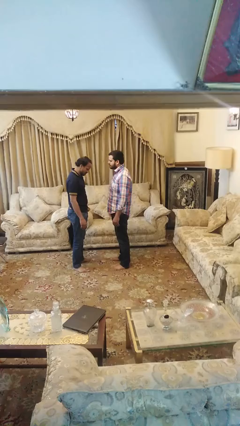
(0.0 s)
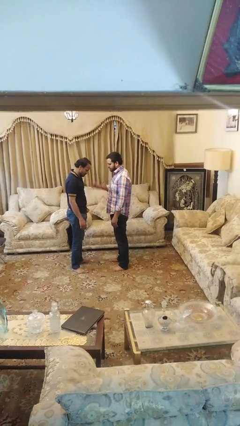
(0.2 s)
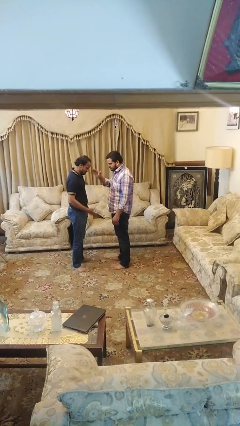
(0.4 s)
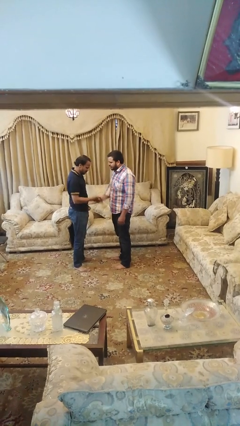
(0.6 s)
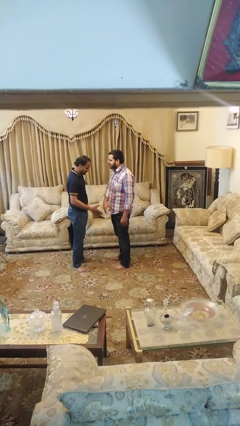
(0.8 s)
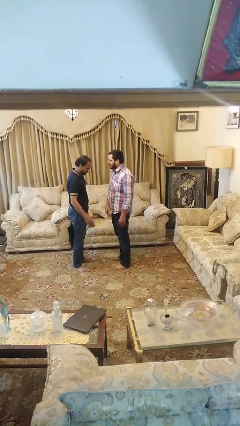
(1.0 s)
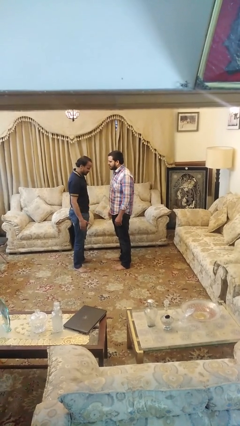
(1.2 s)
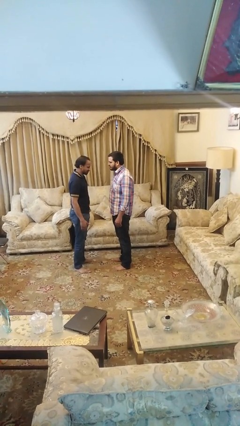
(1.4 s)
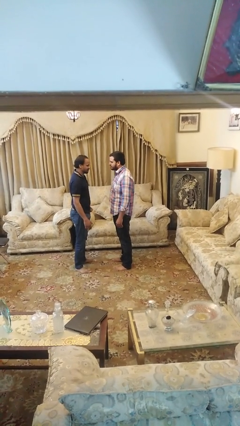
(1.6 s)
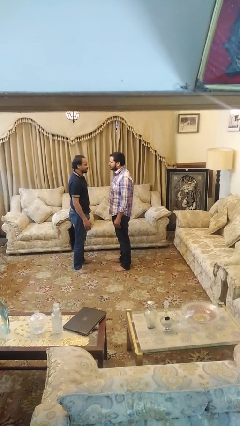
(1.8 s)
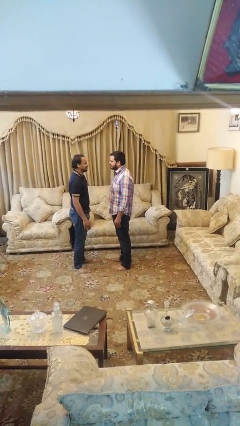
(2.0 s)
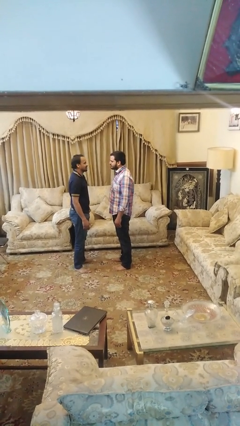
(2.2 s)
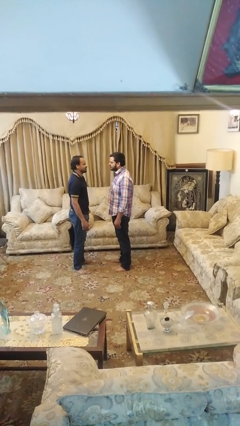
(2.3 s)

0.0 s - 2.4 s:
person highfives hand

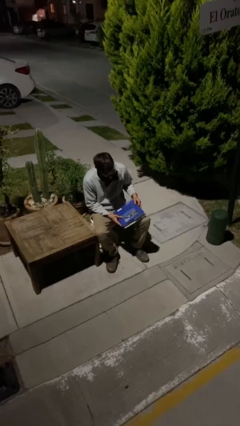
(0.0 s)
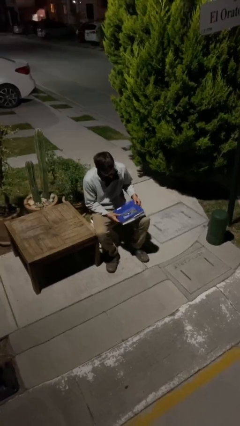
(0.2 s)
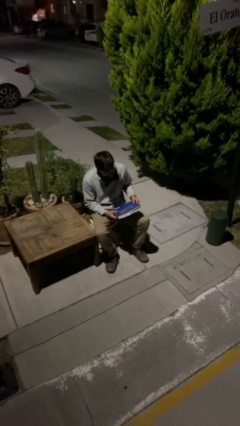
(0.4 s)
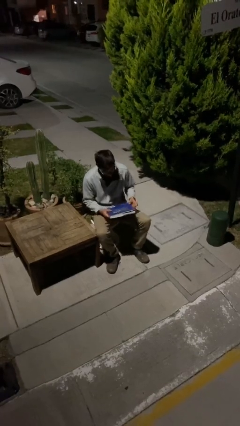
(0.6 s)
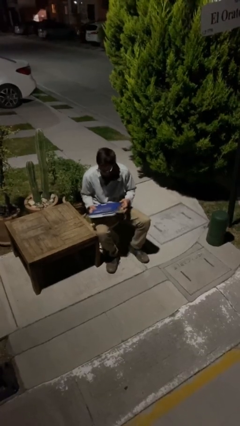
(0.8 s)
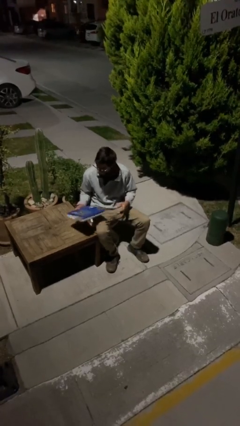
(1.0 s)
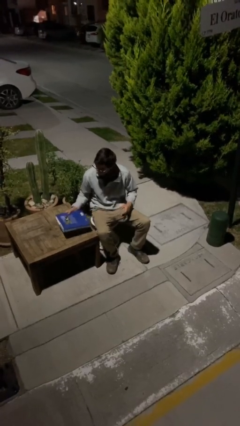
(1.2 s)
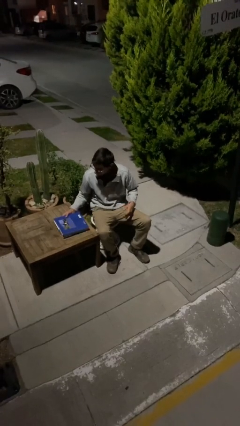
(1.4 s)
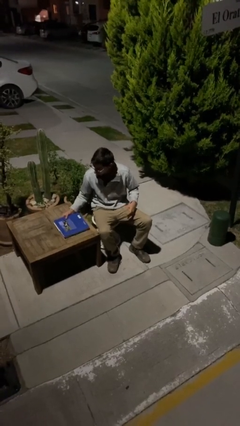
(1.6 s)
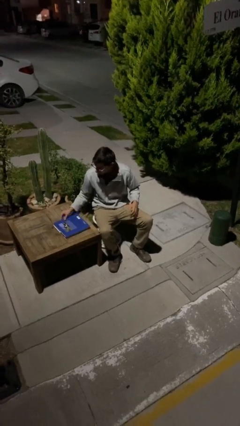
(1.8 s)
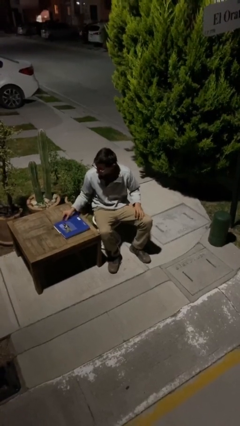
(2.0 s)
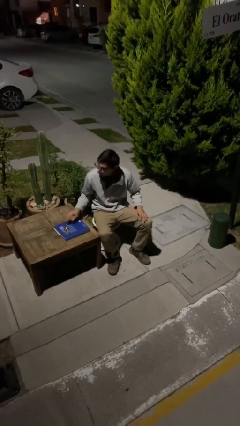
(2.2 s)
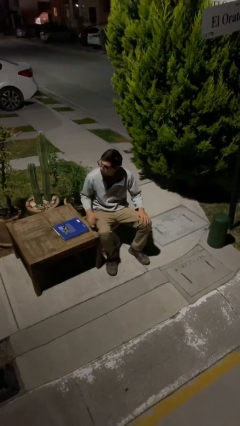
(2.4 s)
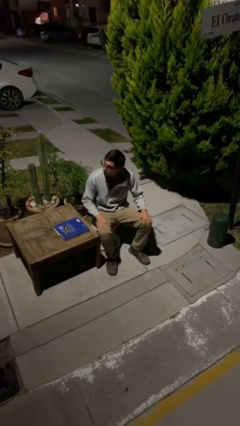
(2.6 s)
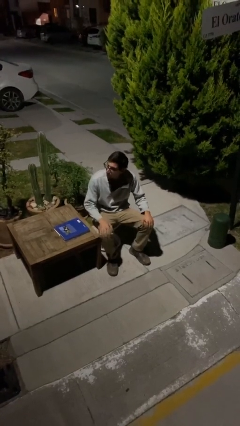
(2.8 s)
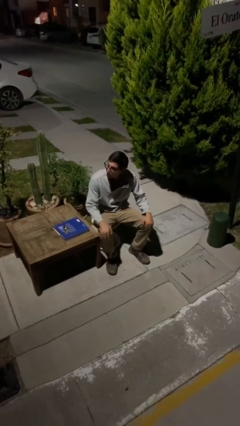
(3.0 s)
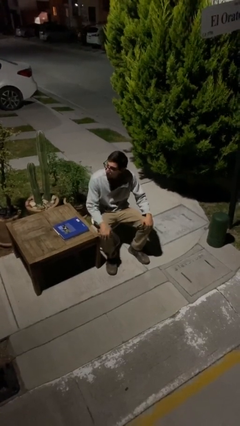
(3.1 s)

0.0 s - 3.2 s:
person puts down object on table

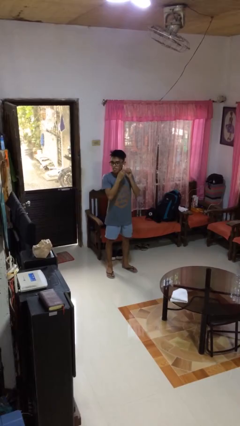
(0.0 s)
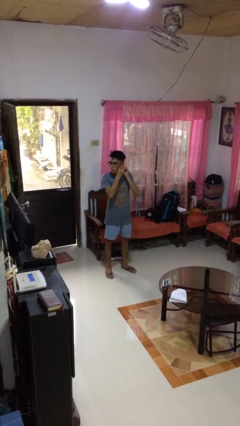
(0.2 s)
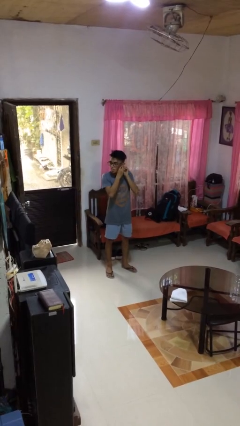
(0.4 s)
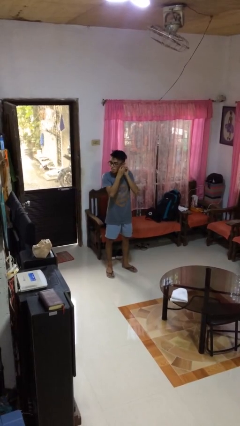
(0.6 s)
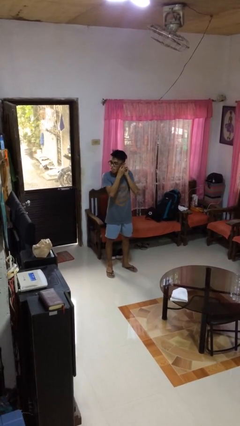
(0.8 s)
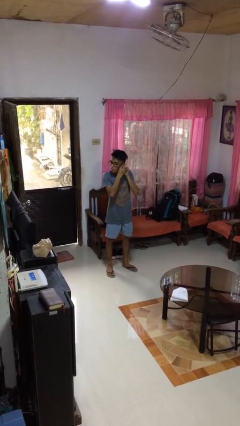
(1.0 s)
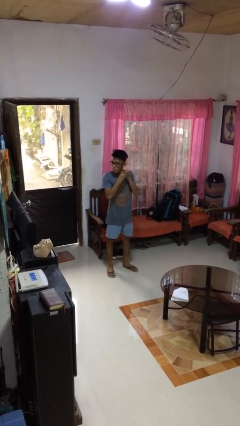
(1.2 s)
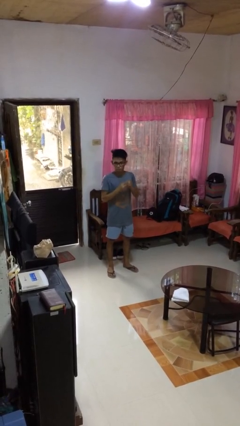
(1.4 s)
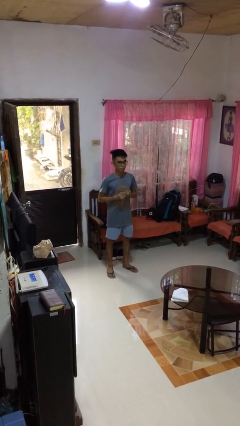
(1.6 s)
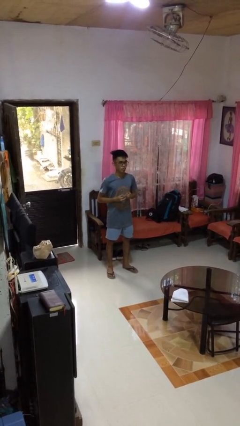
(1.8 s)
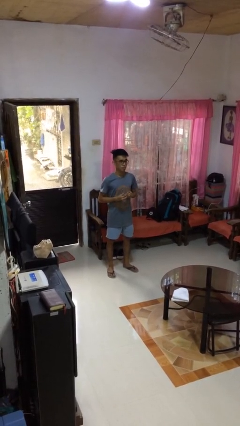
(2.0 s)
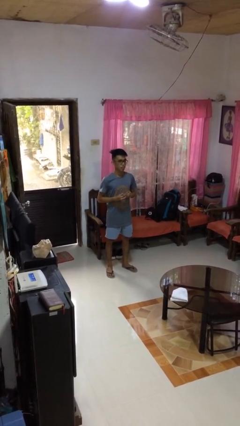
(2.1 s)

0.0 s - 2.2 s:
person takes off earrings

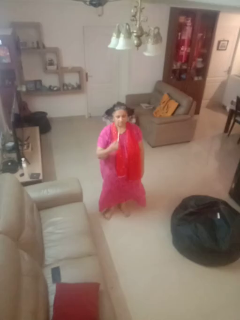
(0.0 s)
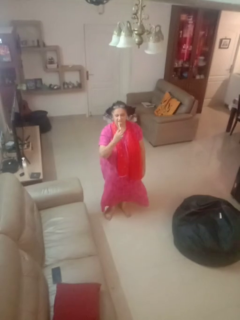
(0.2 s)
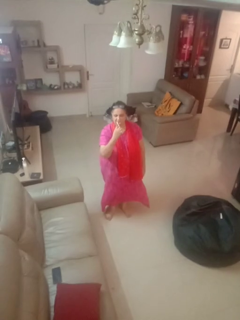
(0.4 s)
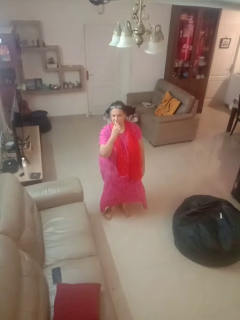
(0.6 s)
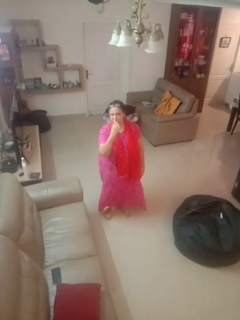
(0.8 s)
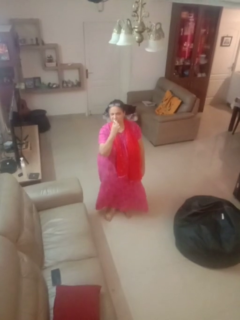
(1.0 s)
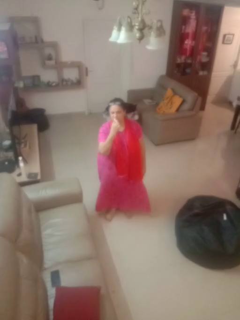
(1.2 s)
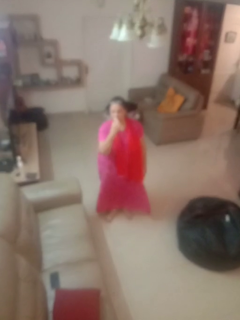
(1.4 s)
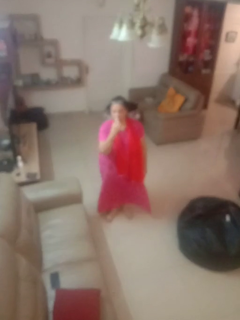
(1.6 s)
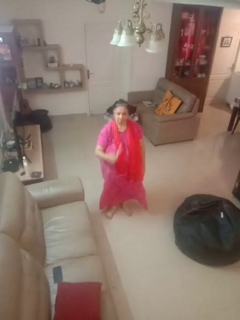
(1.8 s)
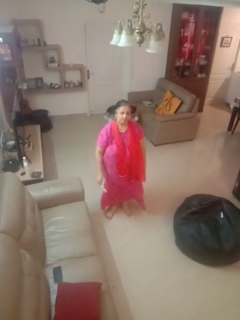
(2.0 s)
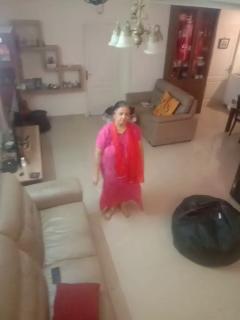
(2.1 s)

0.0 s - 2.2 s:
person brushes teeth

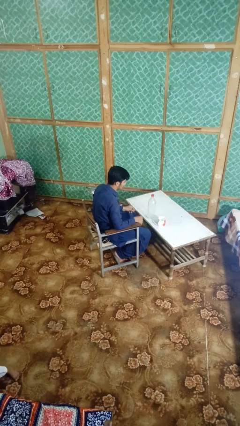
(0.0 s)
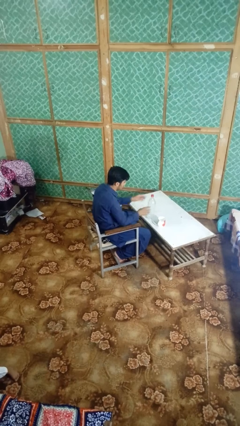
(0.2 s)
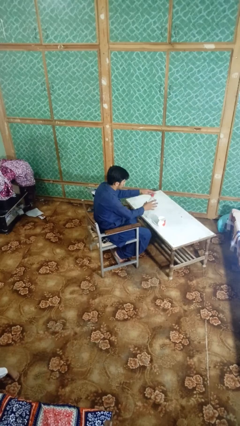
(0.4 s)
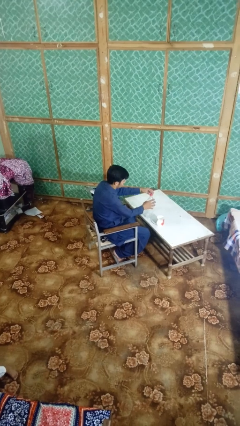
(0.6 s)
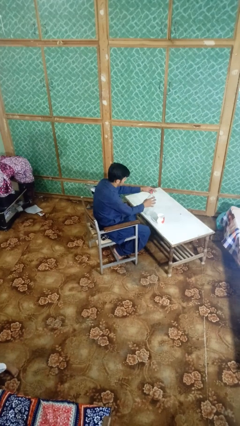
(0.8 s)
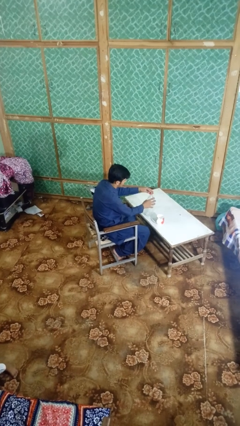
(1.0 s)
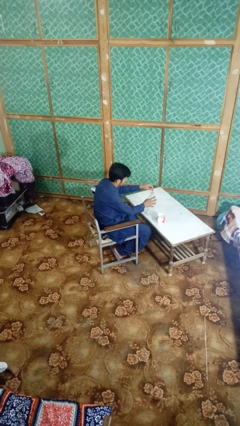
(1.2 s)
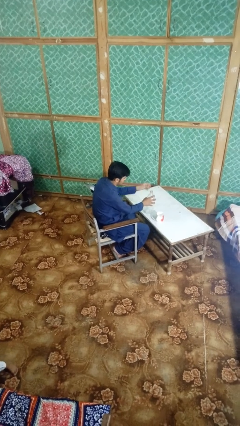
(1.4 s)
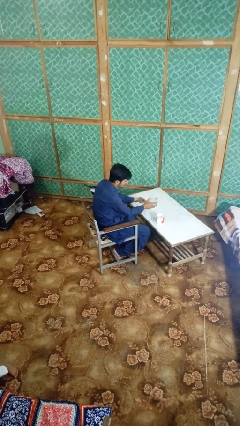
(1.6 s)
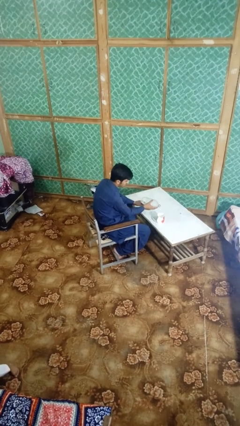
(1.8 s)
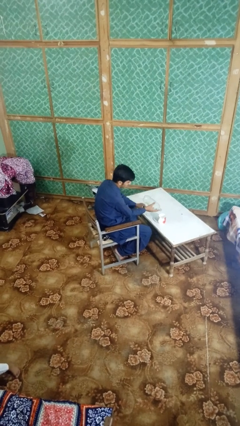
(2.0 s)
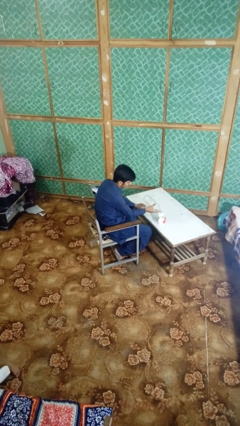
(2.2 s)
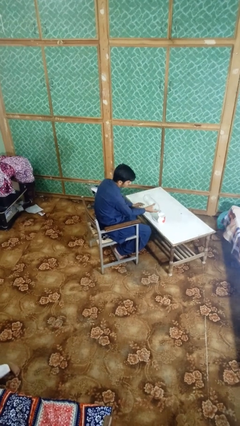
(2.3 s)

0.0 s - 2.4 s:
person unscrews lid from bottle

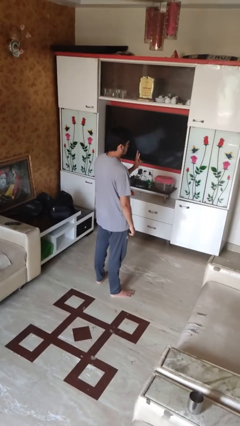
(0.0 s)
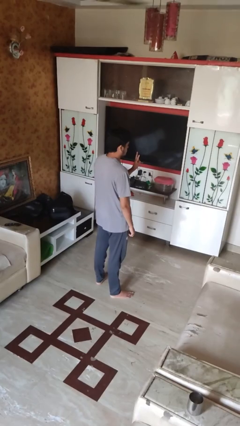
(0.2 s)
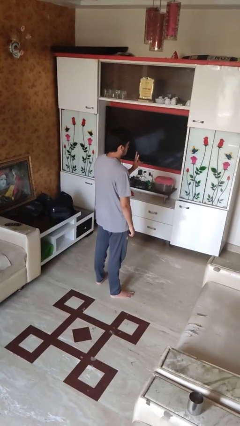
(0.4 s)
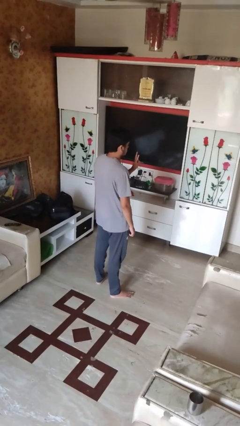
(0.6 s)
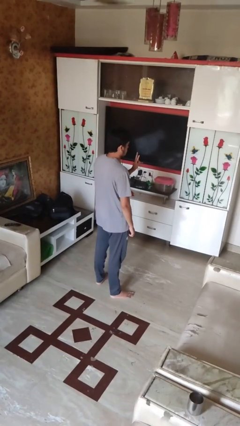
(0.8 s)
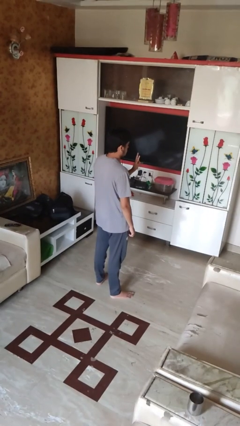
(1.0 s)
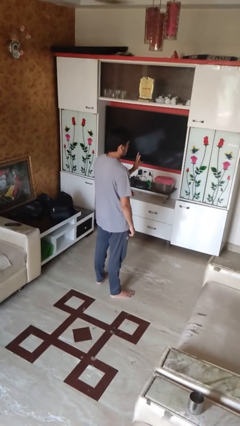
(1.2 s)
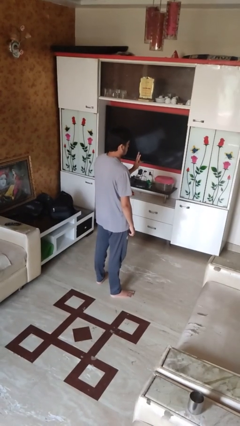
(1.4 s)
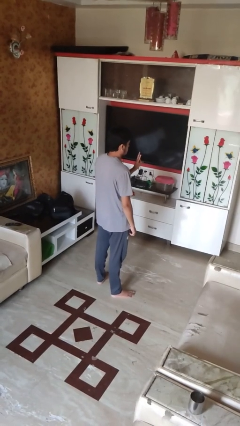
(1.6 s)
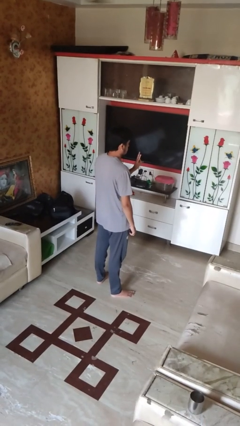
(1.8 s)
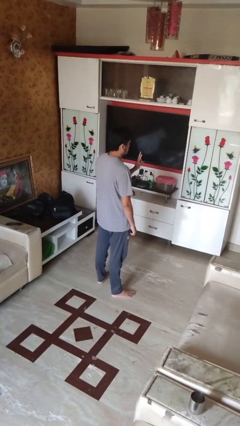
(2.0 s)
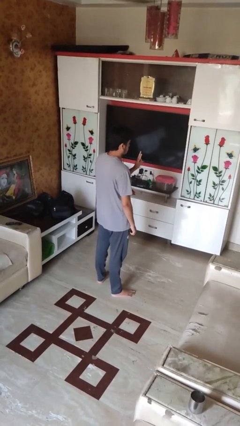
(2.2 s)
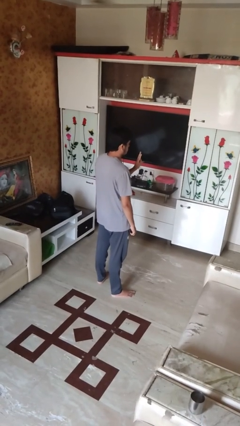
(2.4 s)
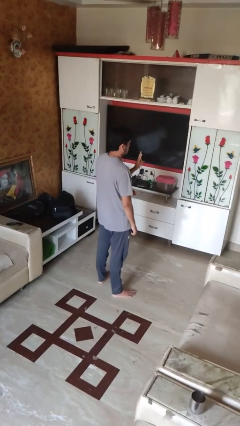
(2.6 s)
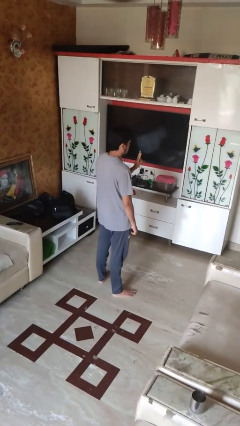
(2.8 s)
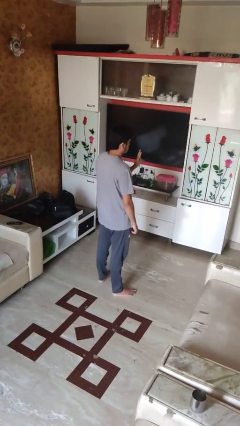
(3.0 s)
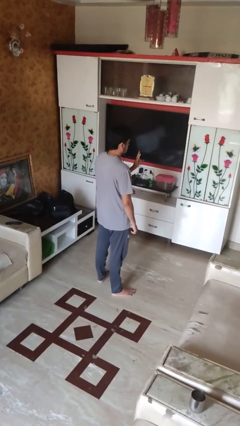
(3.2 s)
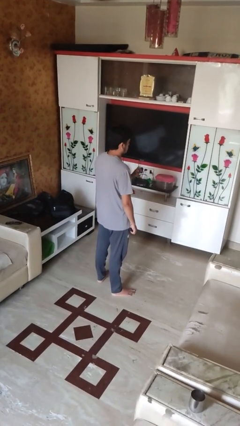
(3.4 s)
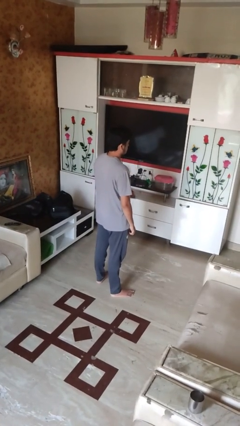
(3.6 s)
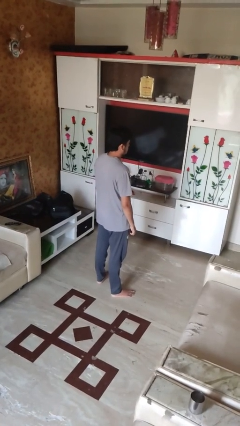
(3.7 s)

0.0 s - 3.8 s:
person gestures peace

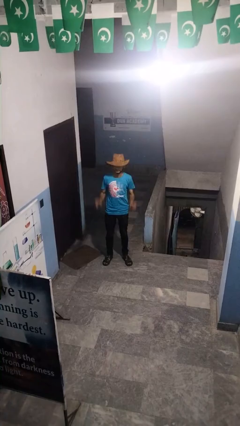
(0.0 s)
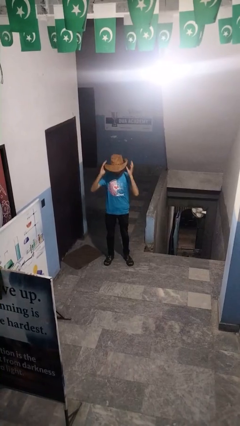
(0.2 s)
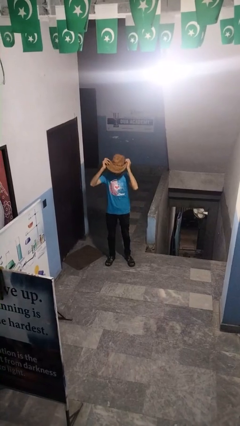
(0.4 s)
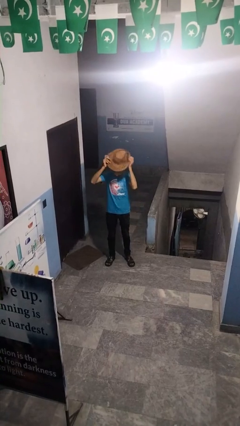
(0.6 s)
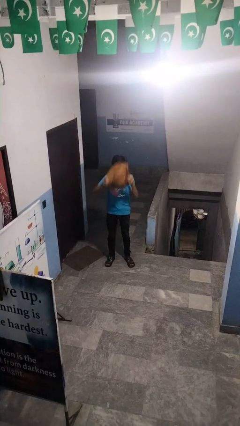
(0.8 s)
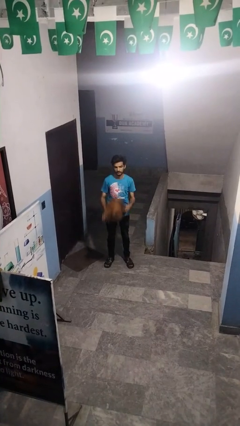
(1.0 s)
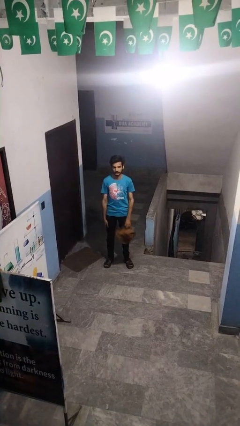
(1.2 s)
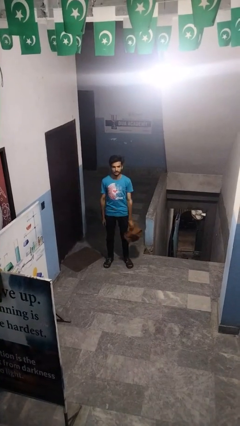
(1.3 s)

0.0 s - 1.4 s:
person takes off hat

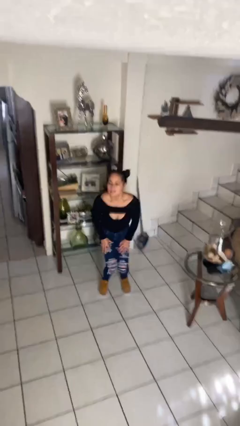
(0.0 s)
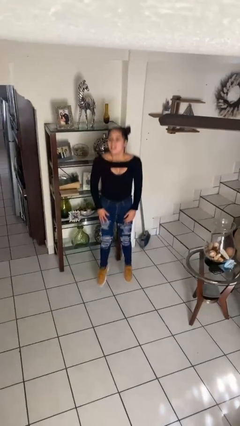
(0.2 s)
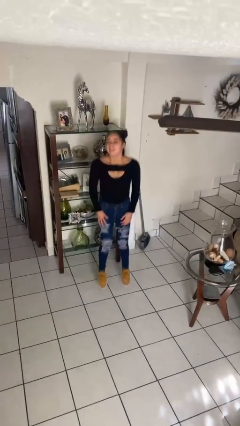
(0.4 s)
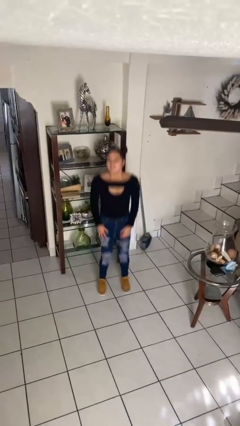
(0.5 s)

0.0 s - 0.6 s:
person jumps
